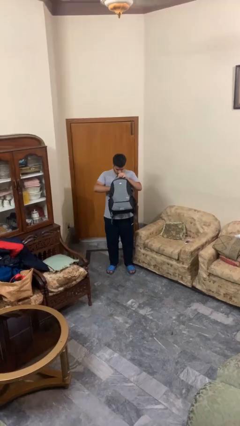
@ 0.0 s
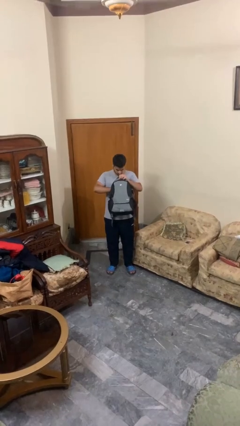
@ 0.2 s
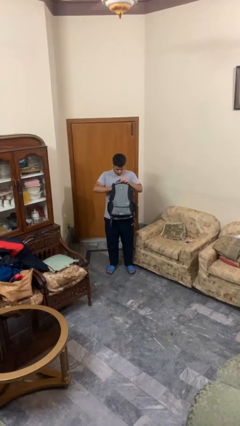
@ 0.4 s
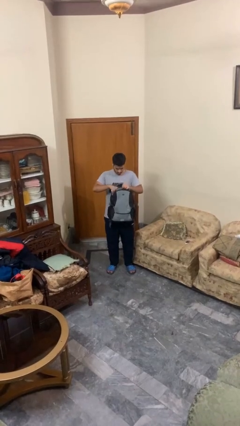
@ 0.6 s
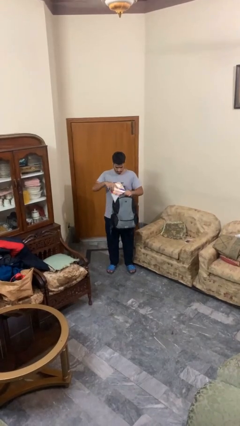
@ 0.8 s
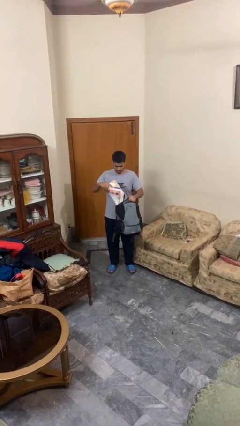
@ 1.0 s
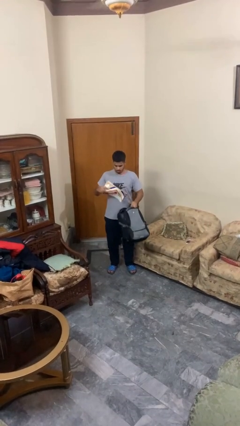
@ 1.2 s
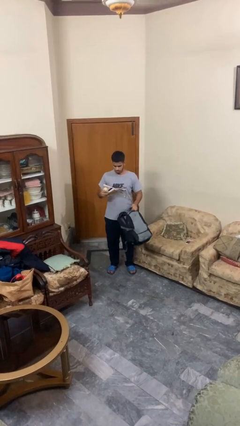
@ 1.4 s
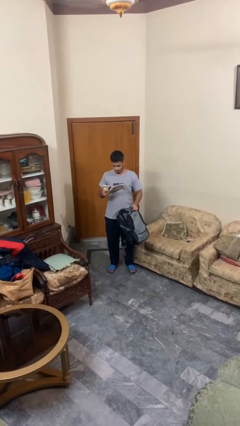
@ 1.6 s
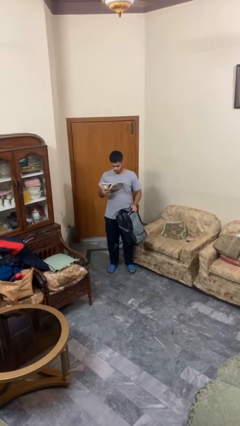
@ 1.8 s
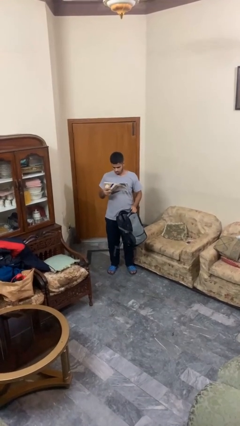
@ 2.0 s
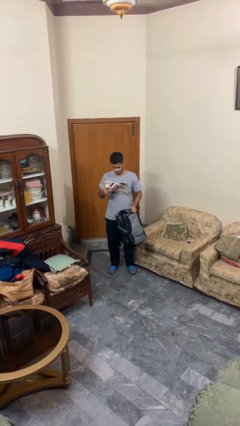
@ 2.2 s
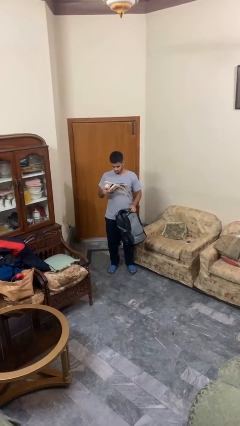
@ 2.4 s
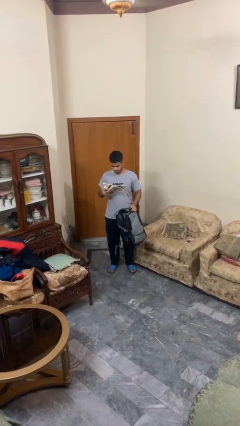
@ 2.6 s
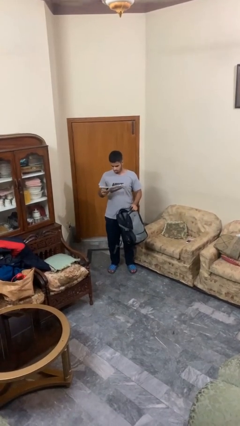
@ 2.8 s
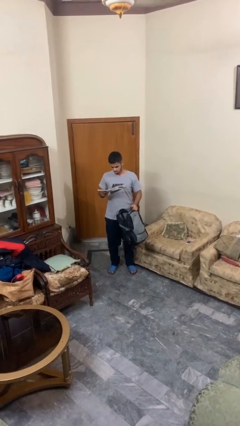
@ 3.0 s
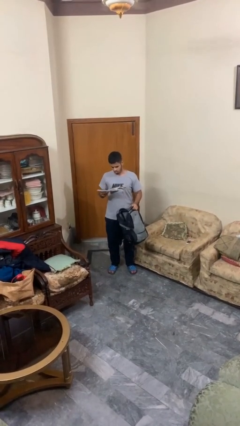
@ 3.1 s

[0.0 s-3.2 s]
person takes object from backpack

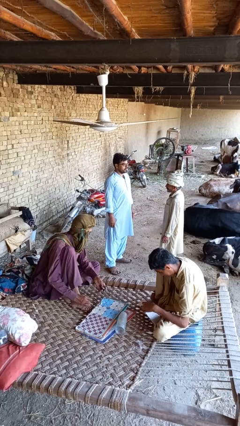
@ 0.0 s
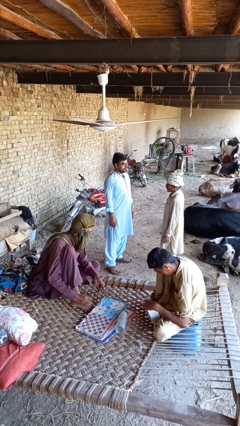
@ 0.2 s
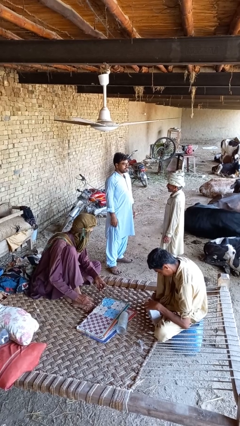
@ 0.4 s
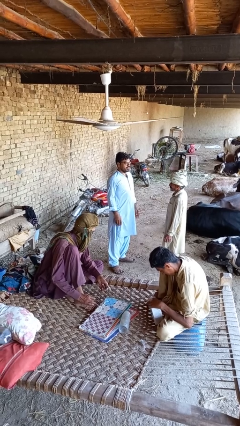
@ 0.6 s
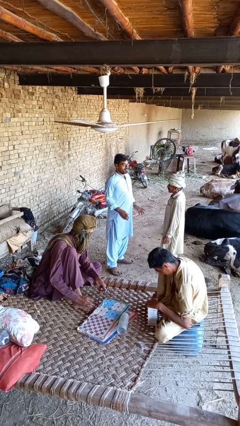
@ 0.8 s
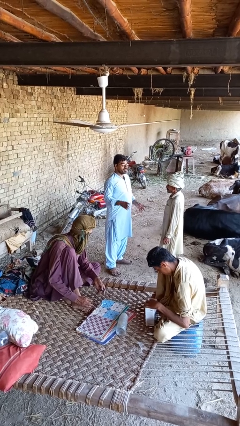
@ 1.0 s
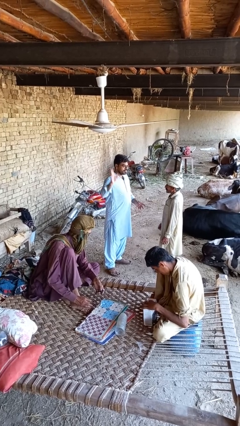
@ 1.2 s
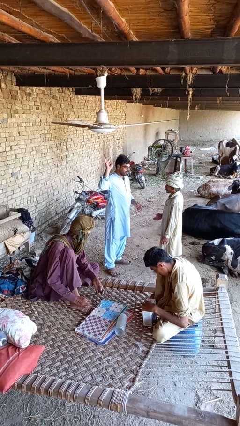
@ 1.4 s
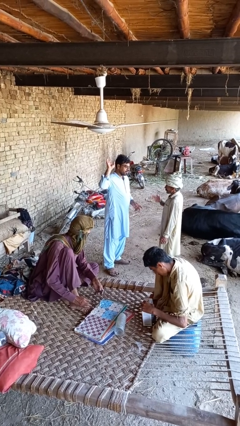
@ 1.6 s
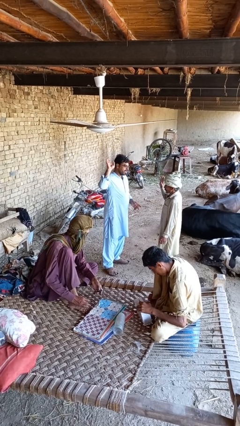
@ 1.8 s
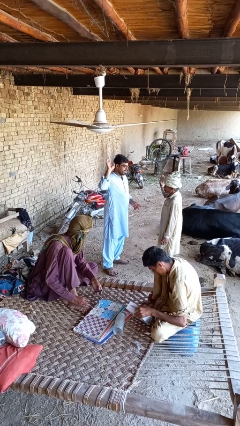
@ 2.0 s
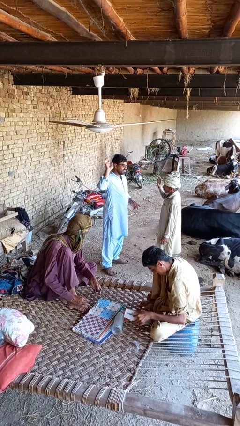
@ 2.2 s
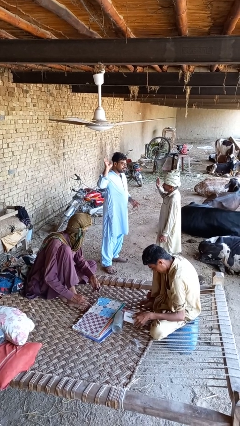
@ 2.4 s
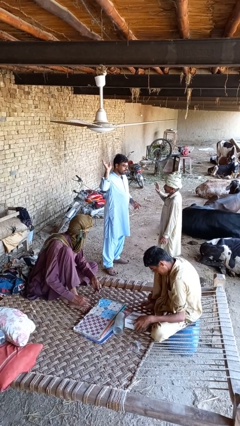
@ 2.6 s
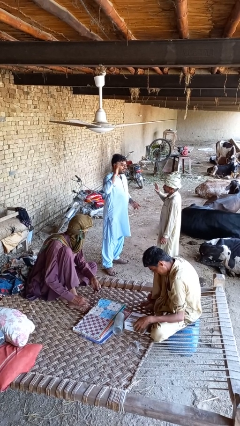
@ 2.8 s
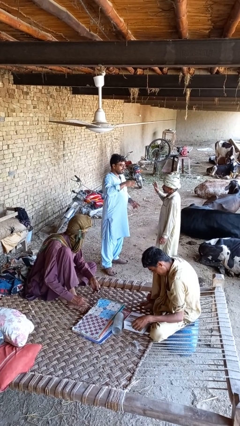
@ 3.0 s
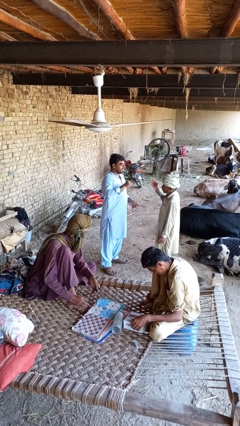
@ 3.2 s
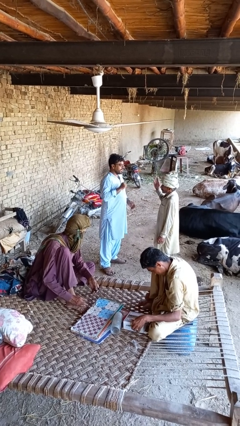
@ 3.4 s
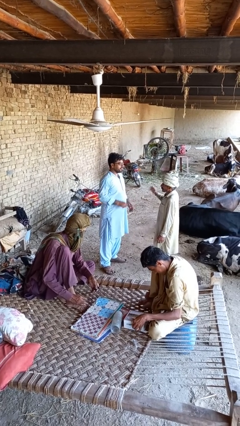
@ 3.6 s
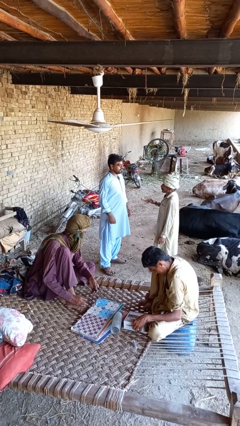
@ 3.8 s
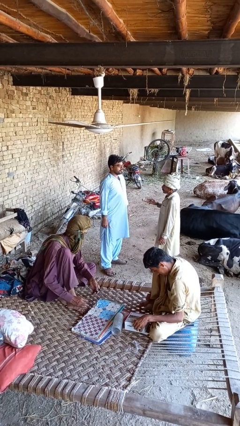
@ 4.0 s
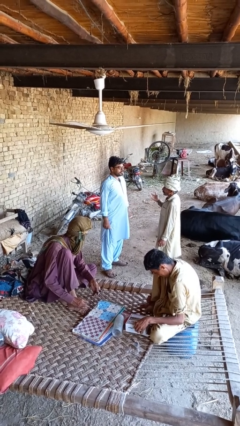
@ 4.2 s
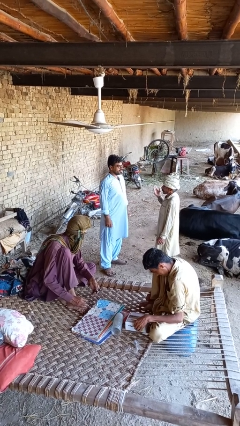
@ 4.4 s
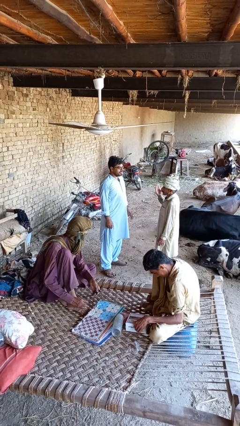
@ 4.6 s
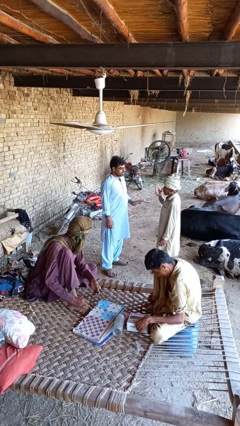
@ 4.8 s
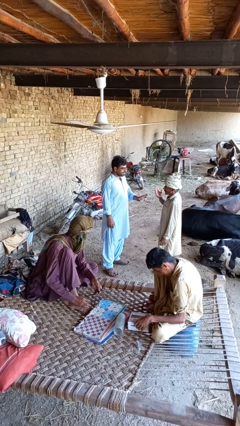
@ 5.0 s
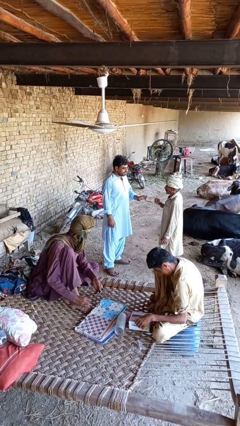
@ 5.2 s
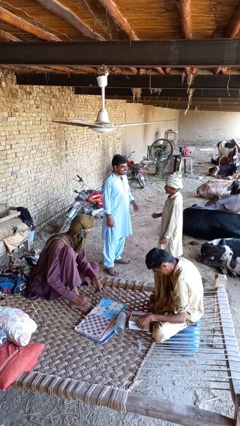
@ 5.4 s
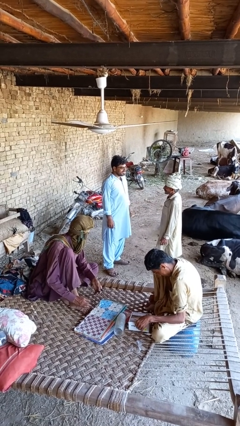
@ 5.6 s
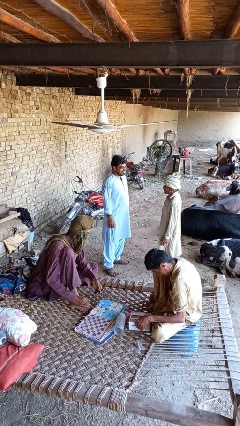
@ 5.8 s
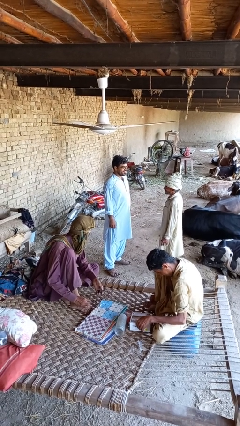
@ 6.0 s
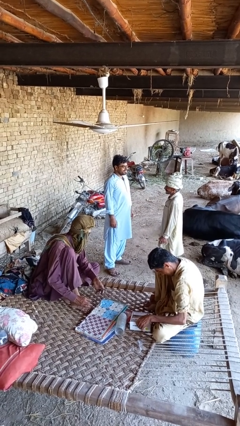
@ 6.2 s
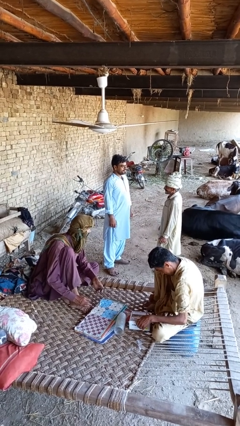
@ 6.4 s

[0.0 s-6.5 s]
person talks to person

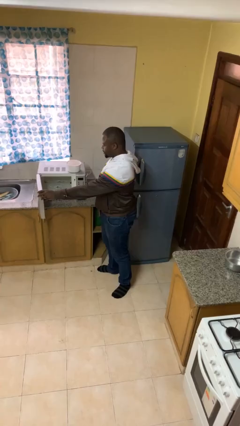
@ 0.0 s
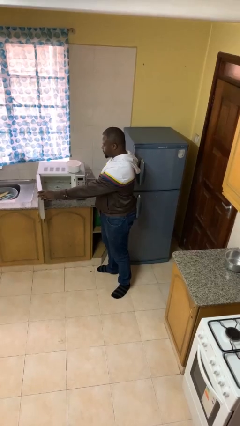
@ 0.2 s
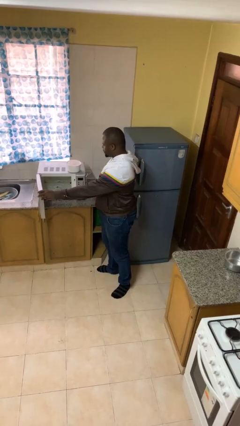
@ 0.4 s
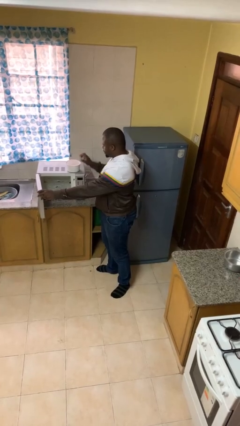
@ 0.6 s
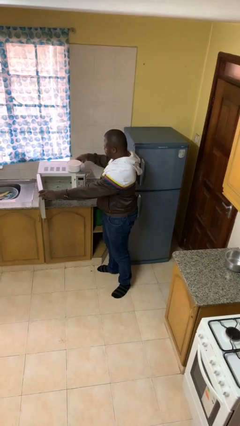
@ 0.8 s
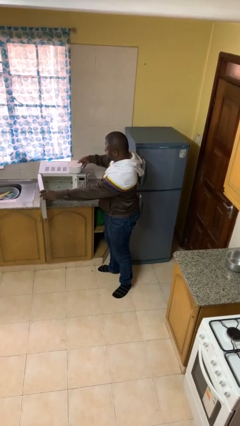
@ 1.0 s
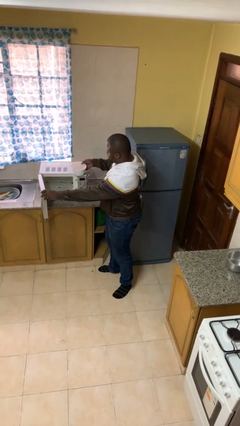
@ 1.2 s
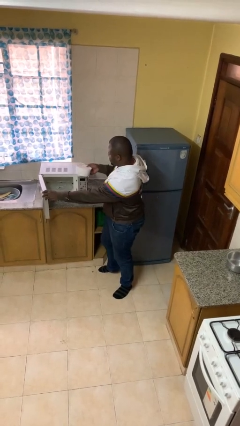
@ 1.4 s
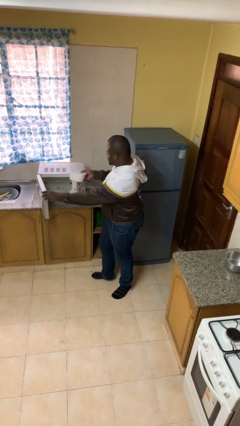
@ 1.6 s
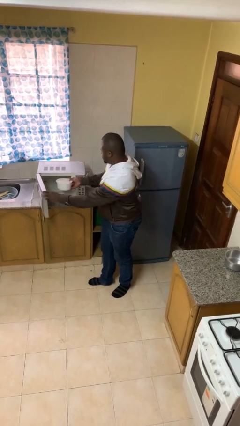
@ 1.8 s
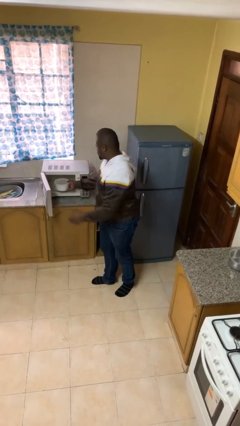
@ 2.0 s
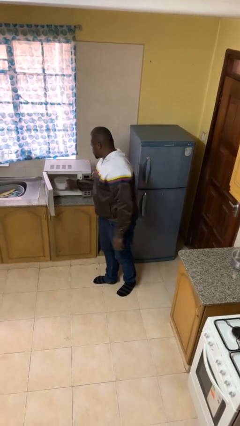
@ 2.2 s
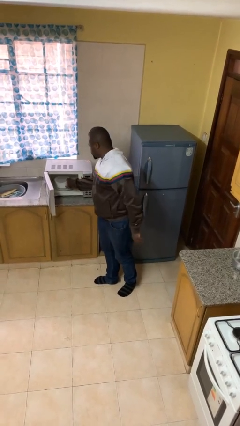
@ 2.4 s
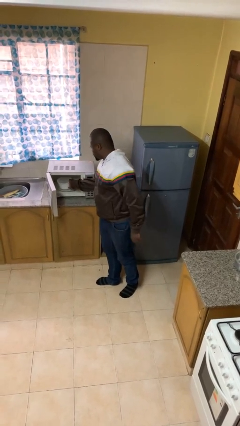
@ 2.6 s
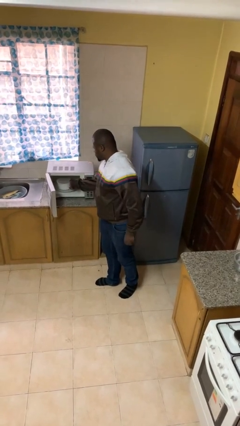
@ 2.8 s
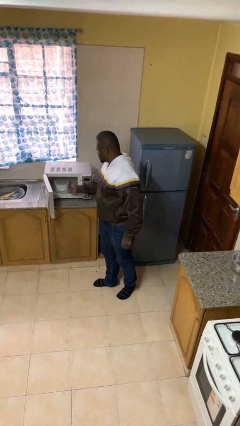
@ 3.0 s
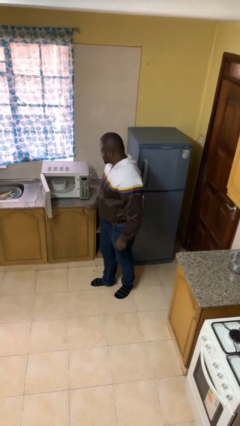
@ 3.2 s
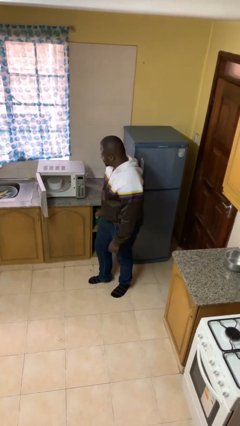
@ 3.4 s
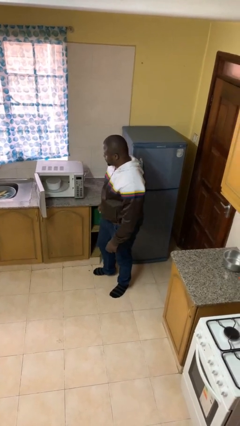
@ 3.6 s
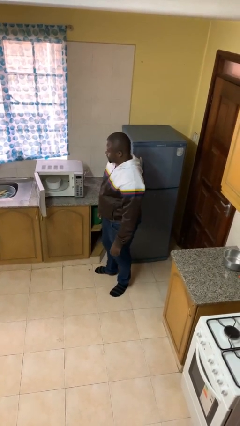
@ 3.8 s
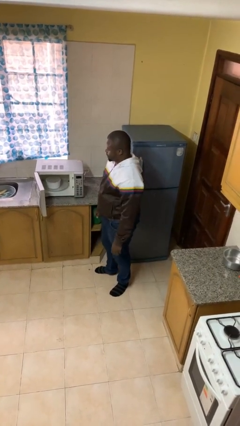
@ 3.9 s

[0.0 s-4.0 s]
person puts object into microwave

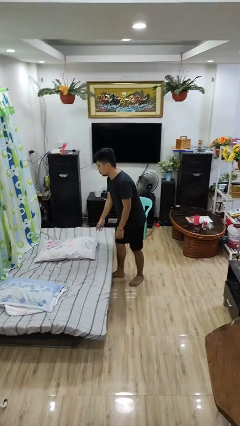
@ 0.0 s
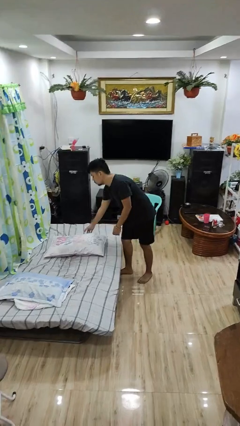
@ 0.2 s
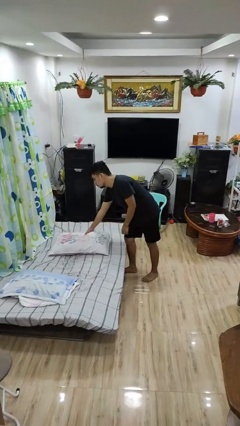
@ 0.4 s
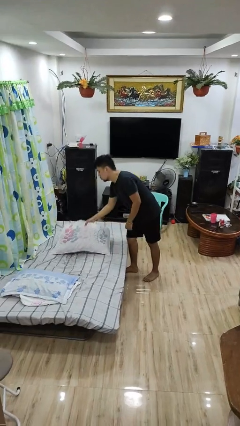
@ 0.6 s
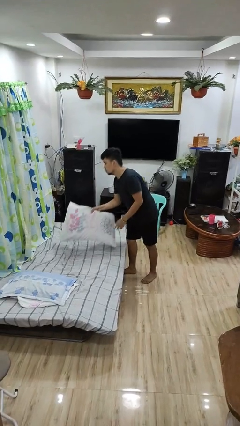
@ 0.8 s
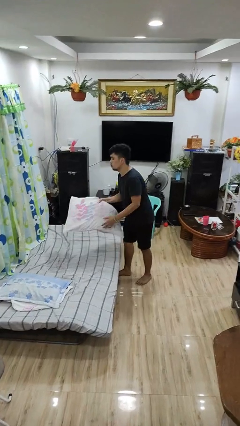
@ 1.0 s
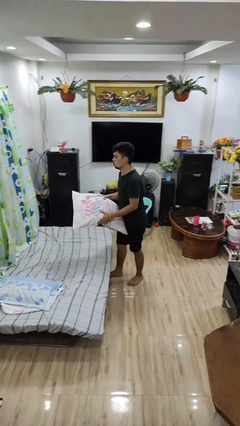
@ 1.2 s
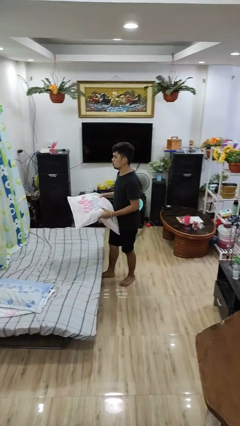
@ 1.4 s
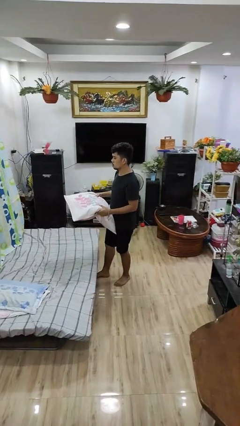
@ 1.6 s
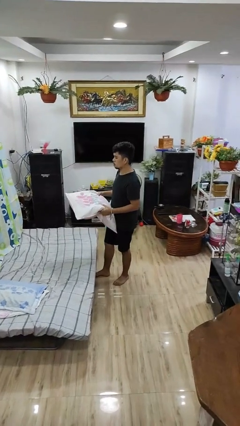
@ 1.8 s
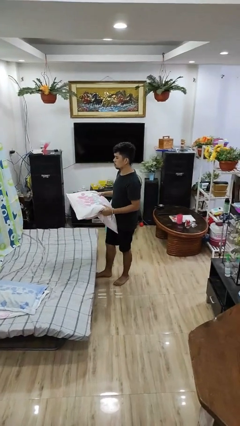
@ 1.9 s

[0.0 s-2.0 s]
person picks up object from bed

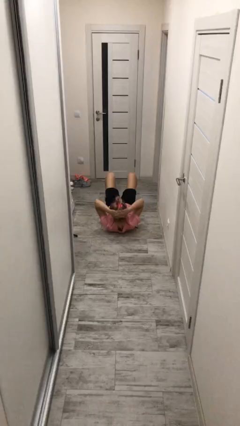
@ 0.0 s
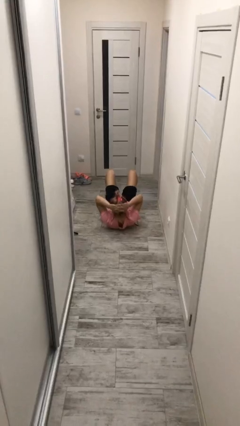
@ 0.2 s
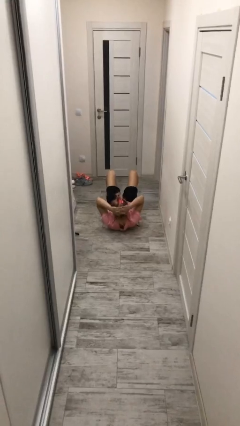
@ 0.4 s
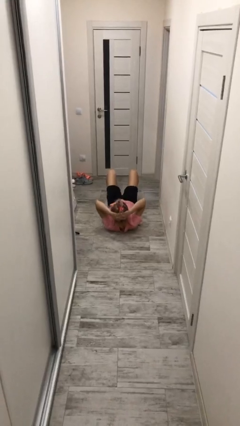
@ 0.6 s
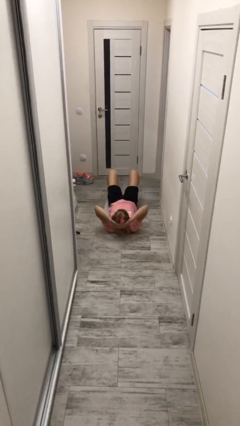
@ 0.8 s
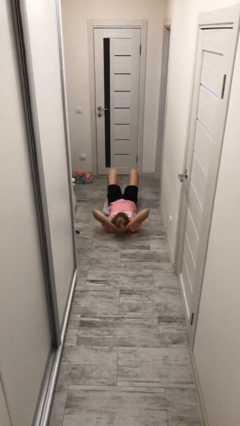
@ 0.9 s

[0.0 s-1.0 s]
person exercises with situp

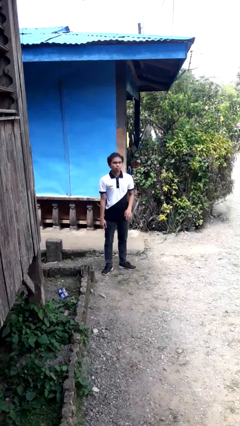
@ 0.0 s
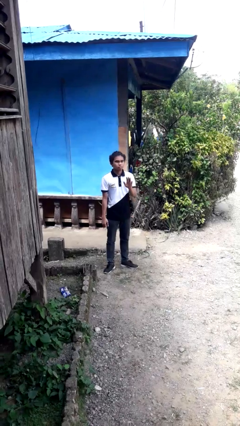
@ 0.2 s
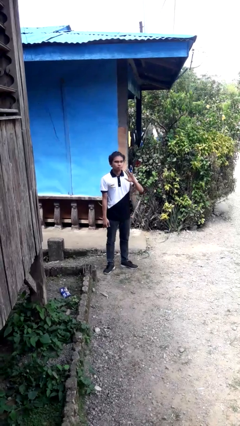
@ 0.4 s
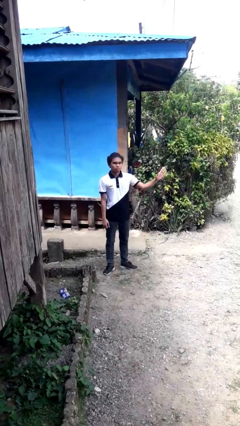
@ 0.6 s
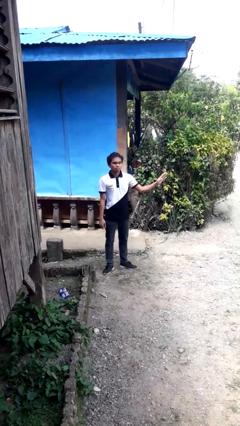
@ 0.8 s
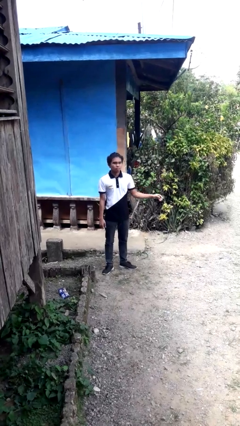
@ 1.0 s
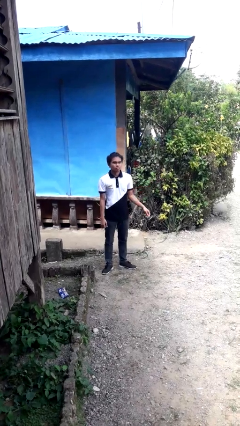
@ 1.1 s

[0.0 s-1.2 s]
person gestures swipe left
